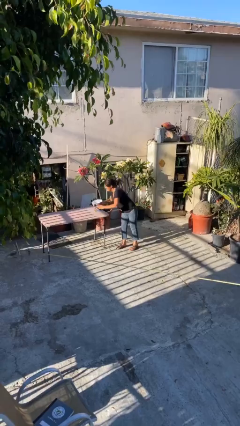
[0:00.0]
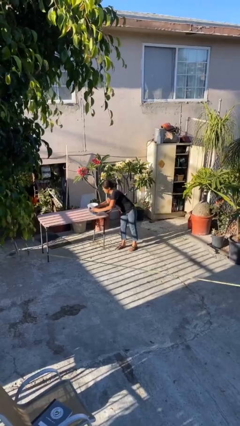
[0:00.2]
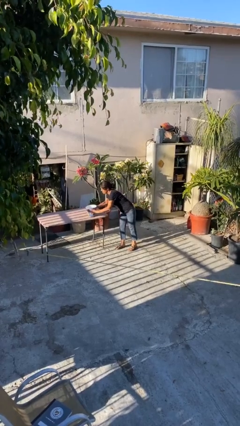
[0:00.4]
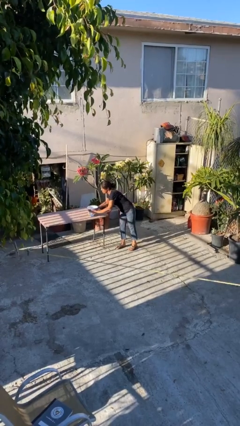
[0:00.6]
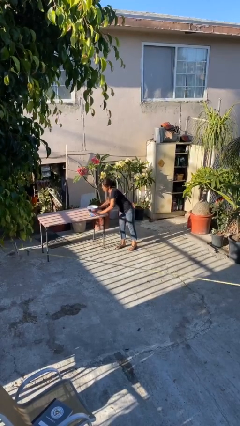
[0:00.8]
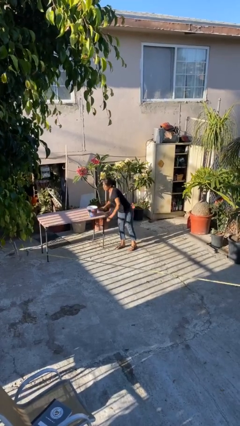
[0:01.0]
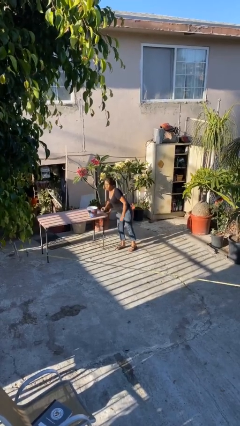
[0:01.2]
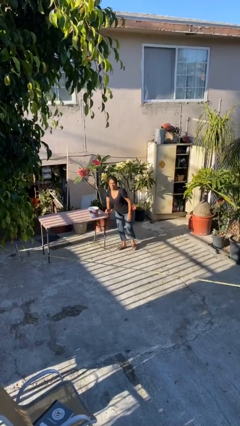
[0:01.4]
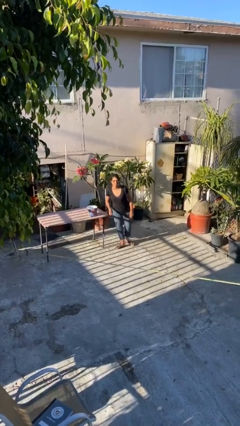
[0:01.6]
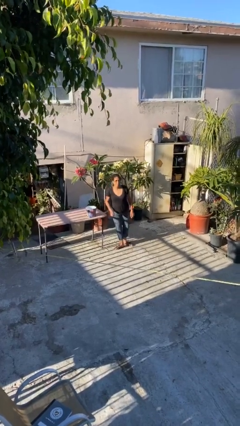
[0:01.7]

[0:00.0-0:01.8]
person puts down object on table

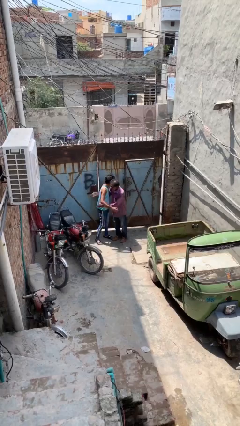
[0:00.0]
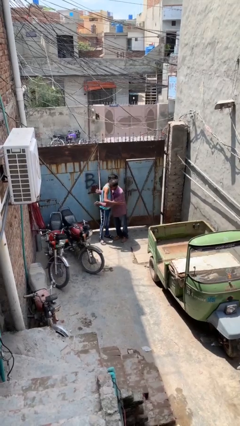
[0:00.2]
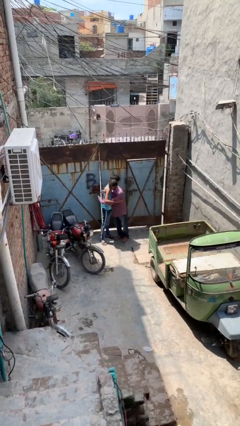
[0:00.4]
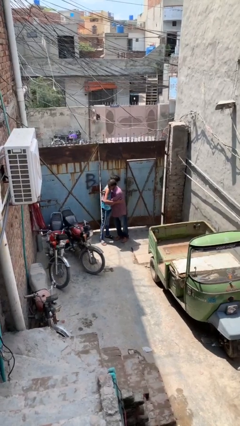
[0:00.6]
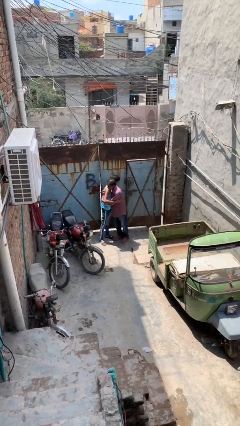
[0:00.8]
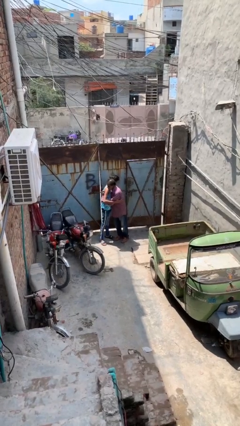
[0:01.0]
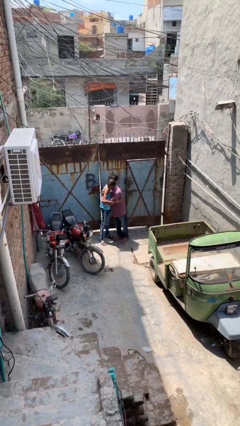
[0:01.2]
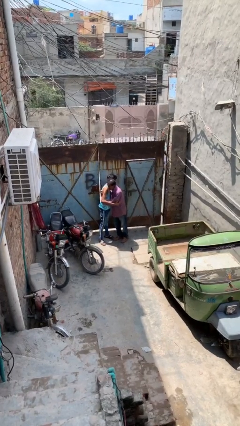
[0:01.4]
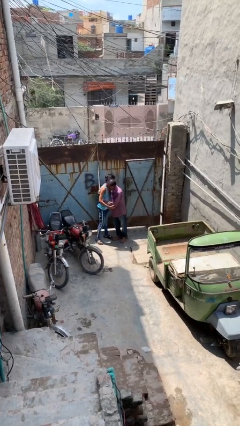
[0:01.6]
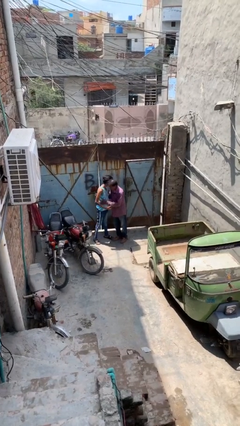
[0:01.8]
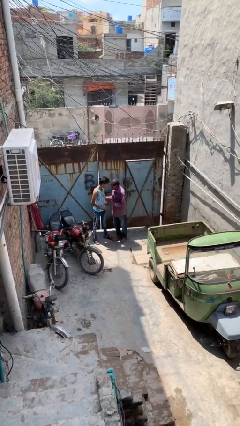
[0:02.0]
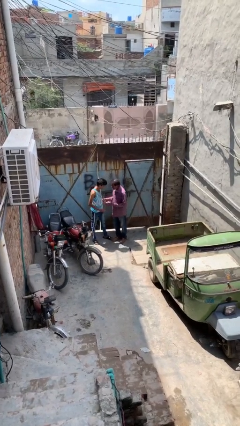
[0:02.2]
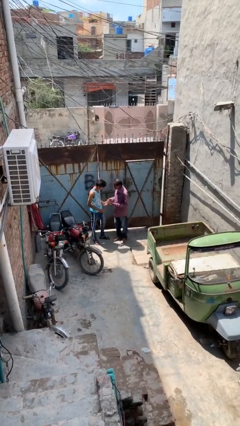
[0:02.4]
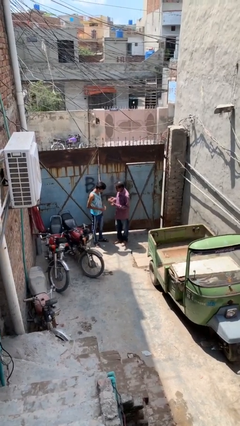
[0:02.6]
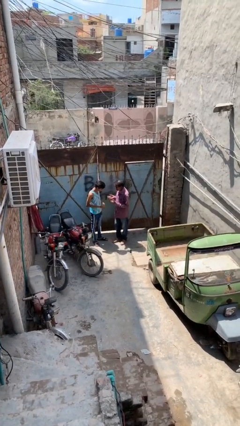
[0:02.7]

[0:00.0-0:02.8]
person embraces person

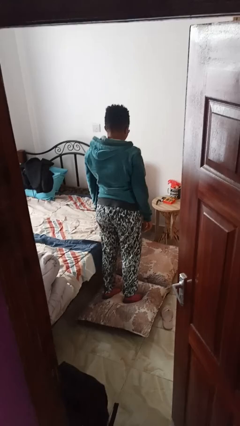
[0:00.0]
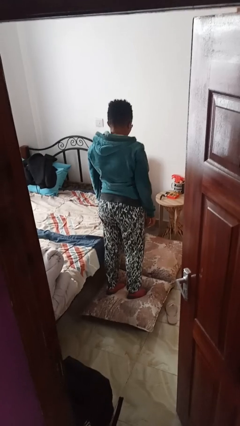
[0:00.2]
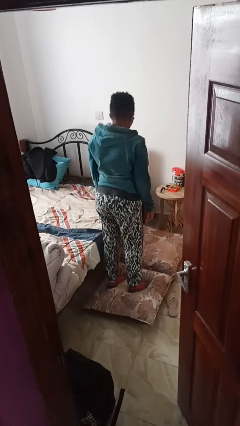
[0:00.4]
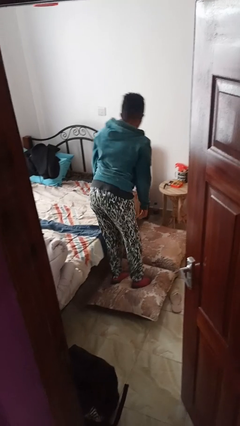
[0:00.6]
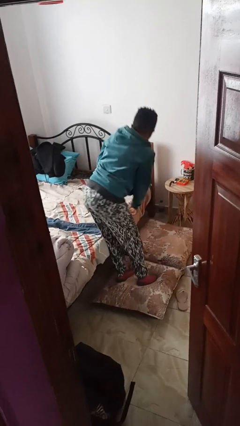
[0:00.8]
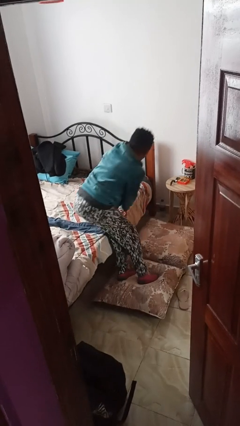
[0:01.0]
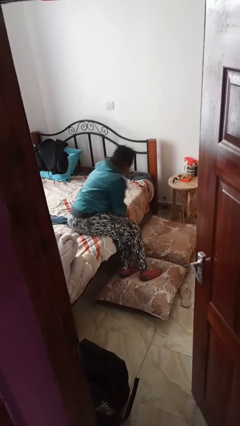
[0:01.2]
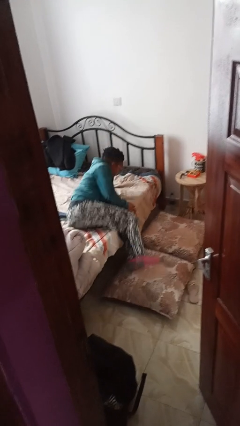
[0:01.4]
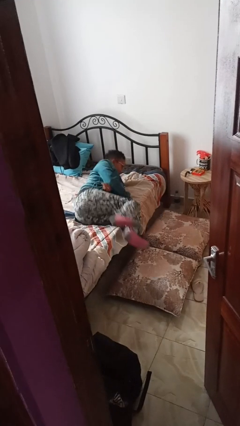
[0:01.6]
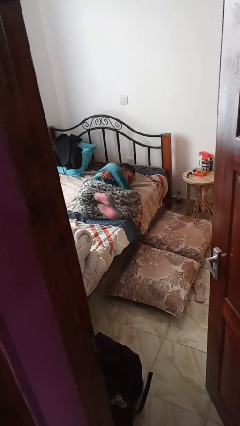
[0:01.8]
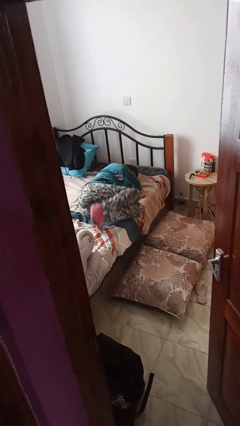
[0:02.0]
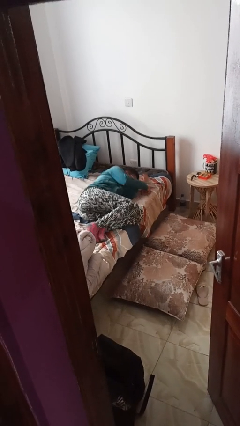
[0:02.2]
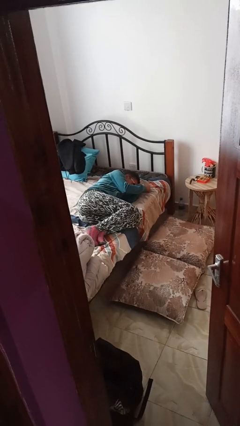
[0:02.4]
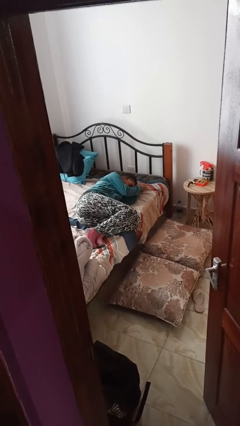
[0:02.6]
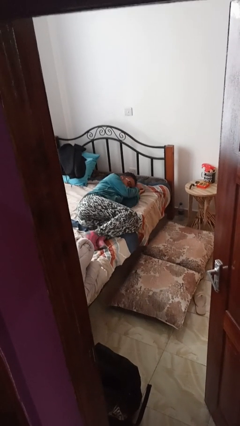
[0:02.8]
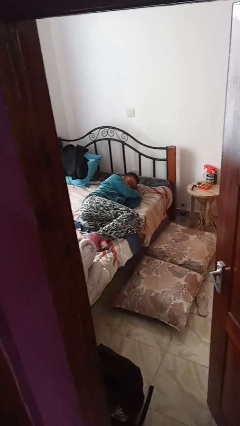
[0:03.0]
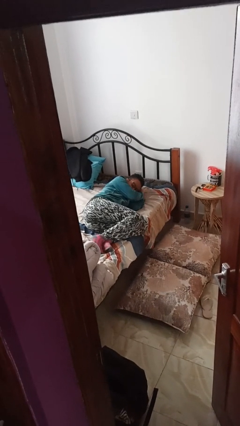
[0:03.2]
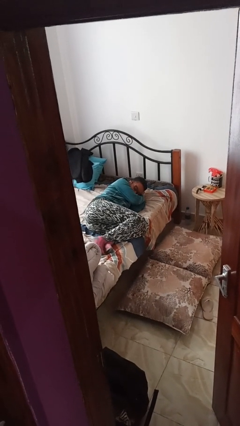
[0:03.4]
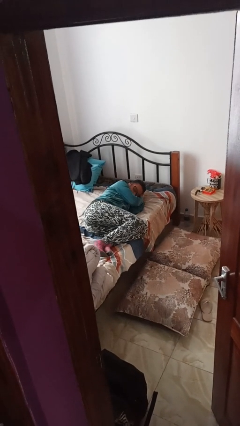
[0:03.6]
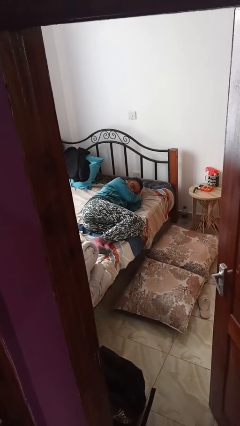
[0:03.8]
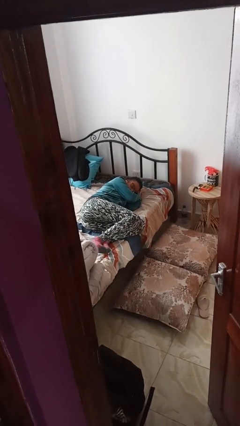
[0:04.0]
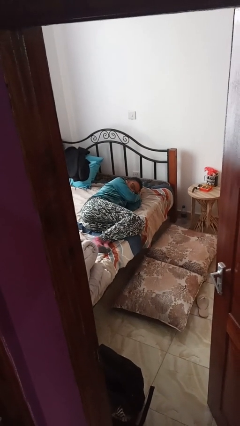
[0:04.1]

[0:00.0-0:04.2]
person lies down on bed

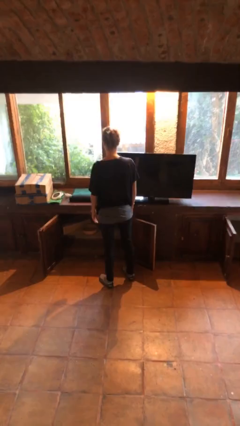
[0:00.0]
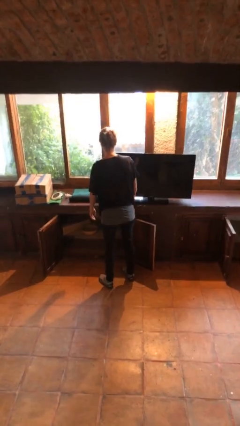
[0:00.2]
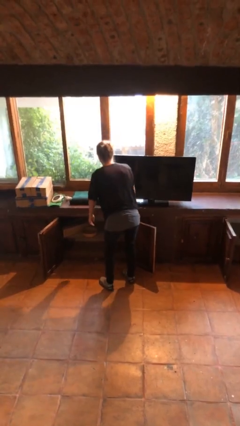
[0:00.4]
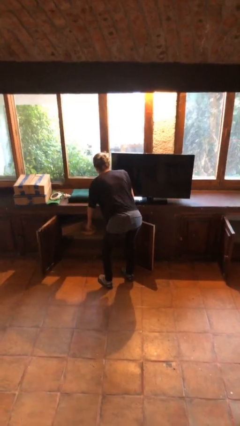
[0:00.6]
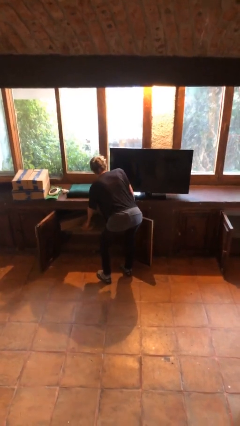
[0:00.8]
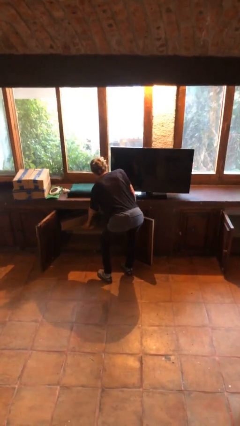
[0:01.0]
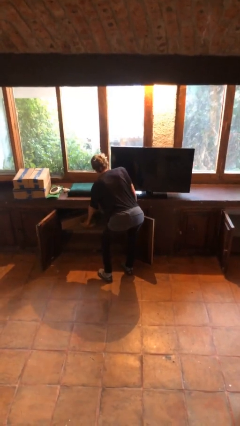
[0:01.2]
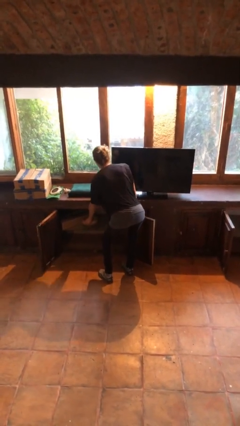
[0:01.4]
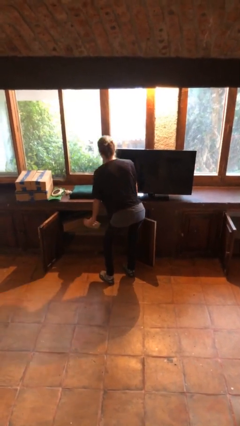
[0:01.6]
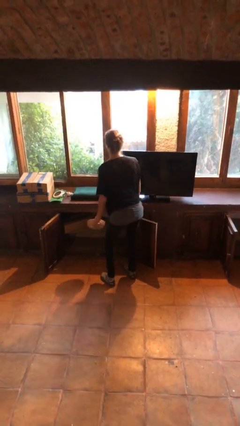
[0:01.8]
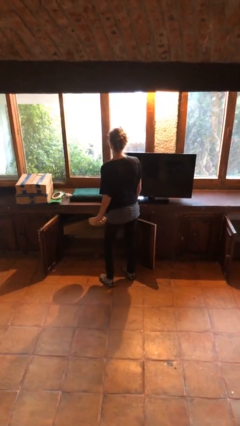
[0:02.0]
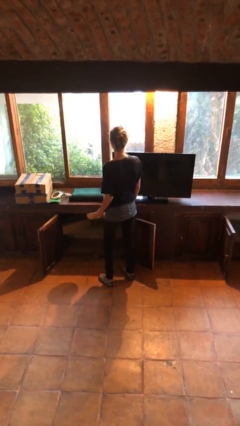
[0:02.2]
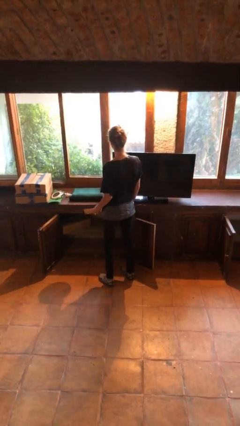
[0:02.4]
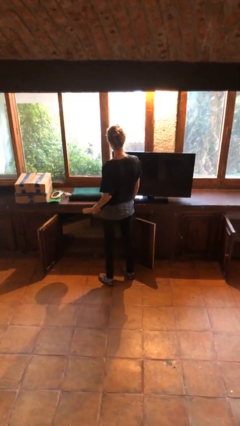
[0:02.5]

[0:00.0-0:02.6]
person picks up object from cabinet

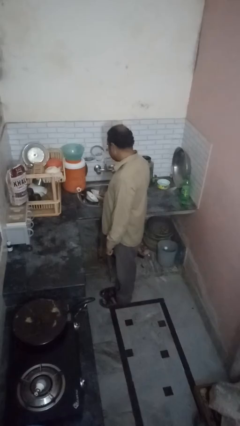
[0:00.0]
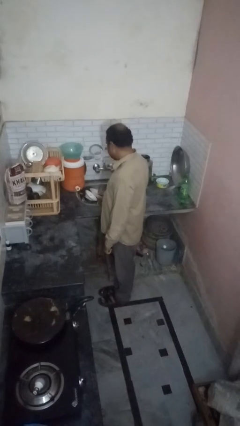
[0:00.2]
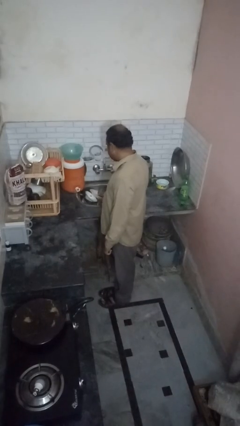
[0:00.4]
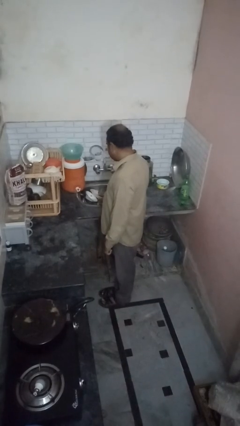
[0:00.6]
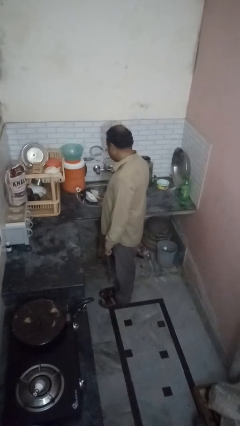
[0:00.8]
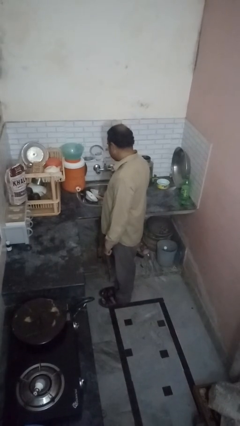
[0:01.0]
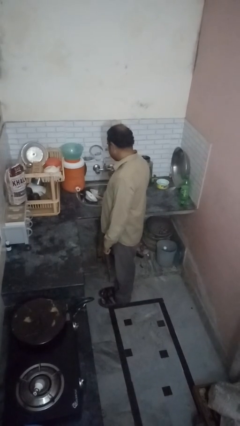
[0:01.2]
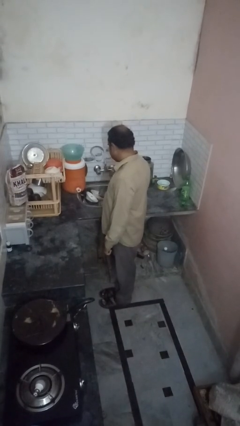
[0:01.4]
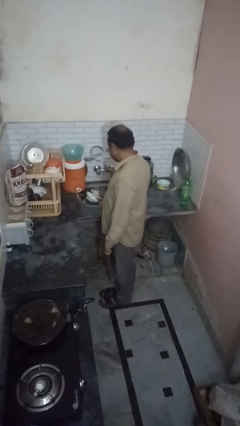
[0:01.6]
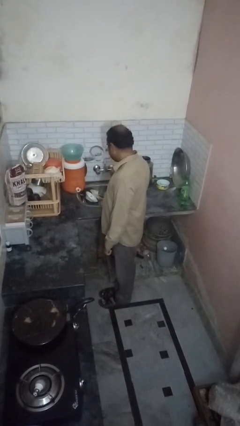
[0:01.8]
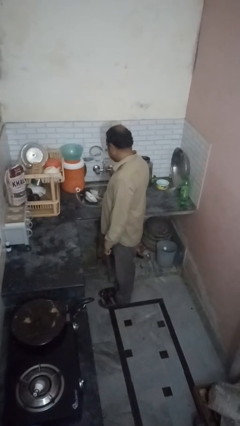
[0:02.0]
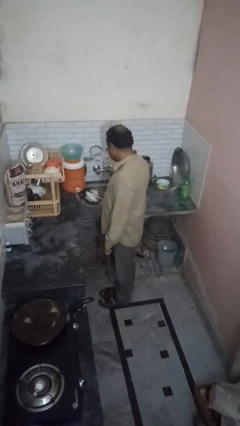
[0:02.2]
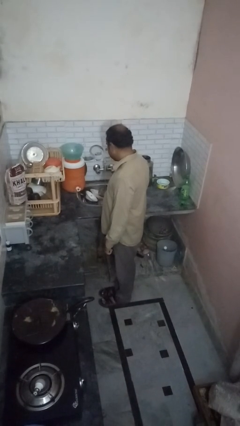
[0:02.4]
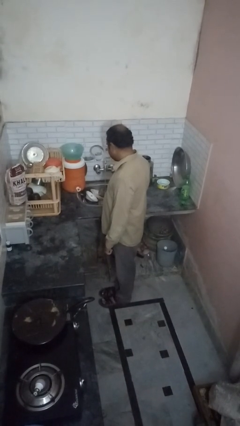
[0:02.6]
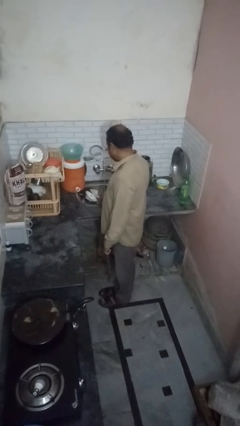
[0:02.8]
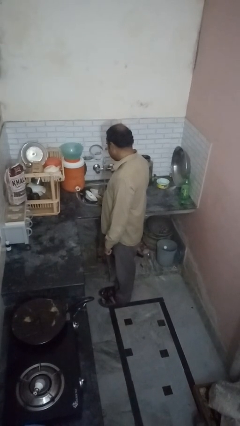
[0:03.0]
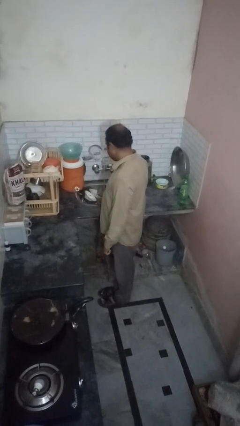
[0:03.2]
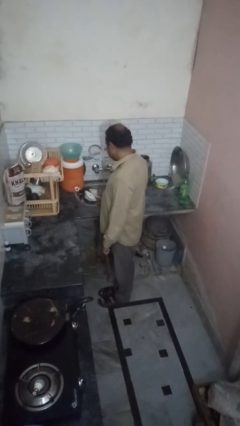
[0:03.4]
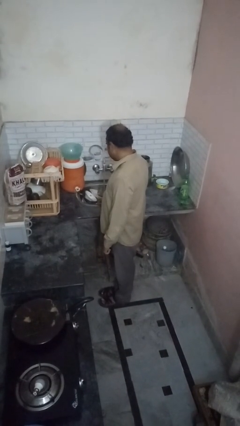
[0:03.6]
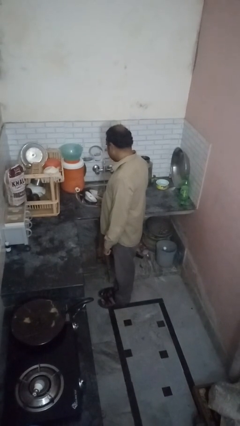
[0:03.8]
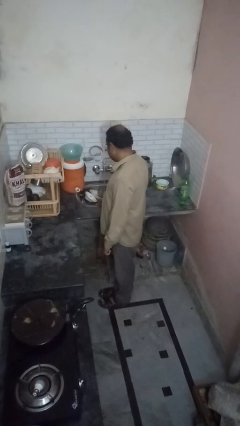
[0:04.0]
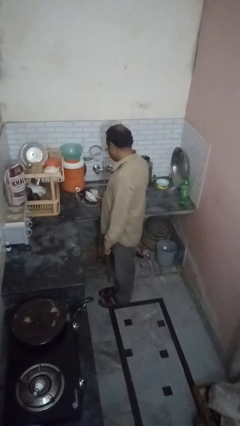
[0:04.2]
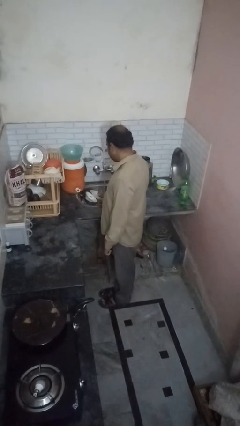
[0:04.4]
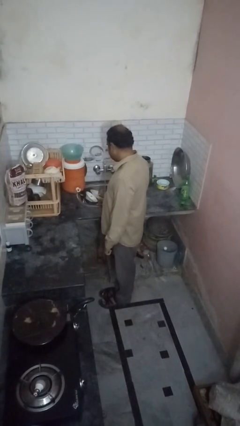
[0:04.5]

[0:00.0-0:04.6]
person opens dishwasher

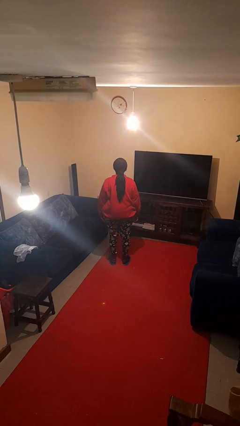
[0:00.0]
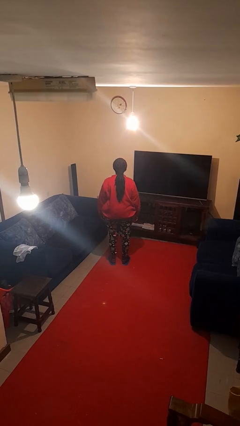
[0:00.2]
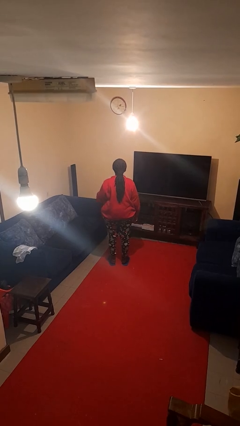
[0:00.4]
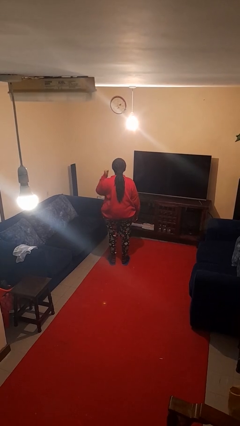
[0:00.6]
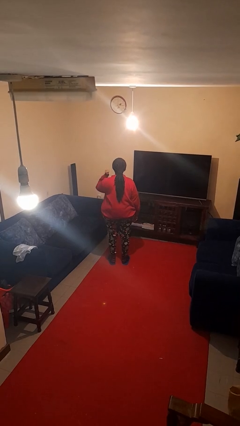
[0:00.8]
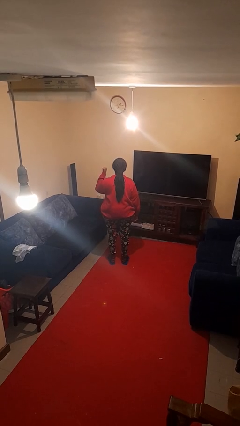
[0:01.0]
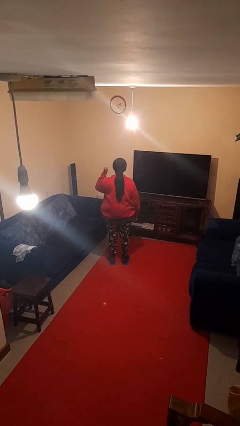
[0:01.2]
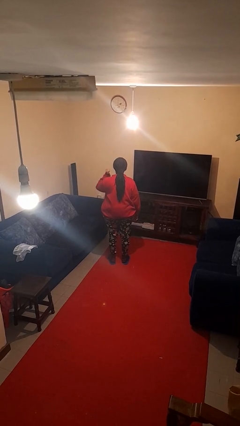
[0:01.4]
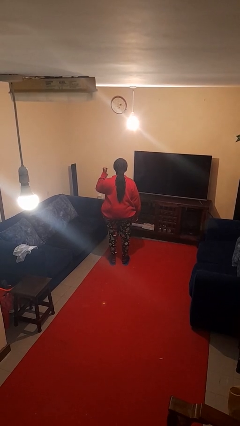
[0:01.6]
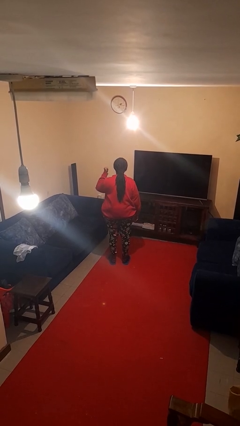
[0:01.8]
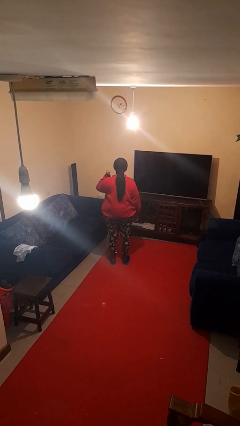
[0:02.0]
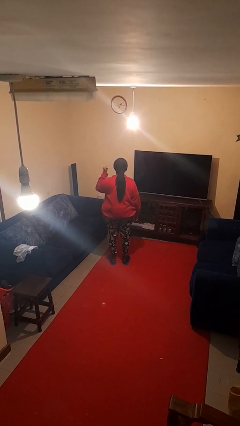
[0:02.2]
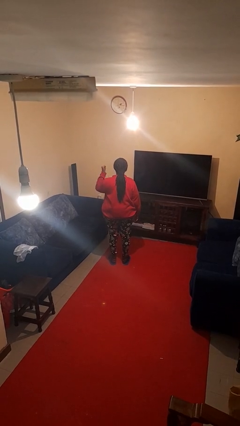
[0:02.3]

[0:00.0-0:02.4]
person gestures behind me
